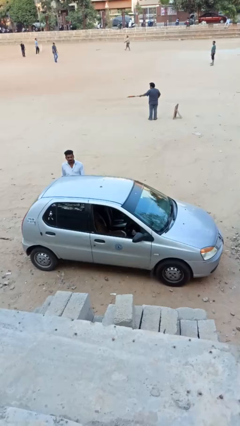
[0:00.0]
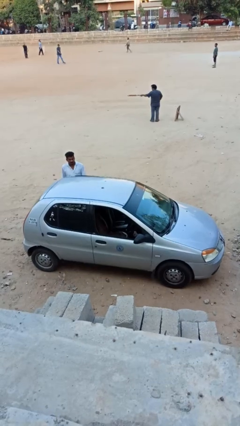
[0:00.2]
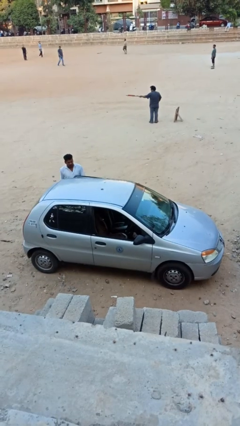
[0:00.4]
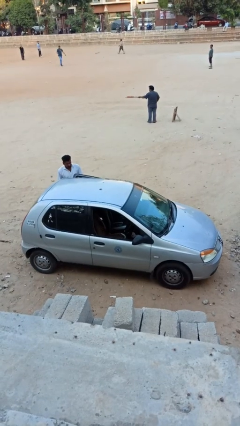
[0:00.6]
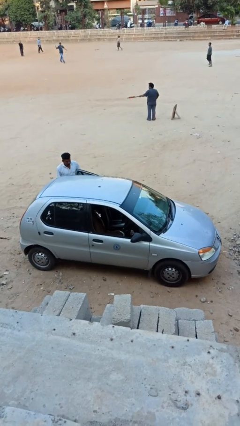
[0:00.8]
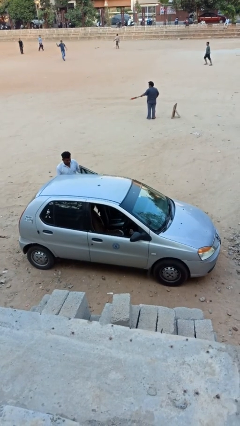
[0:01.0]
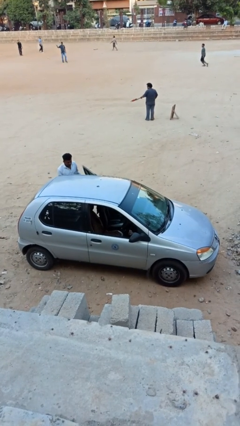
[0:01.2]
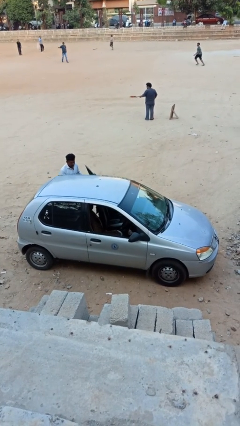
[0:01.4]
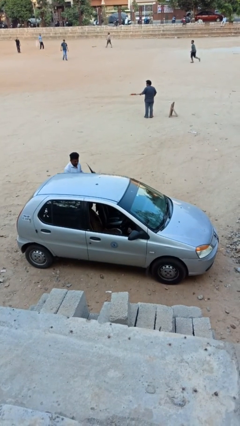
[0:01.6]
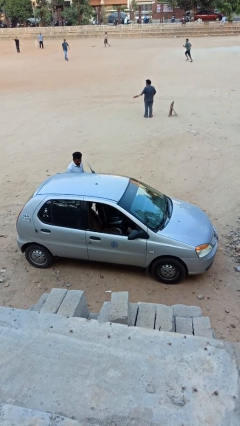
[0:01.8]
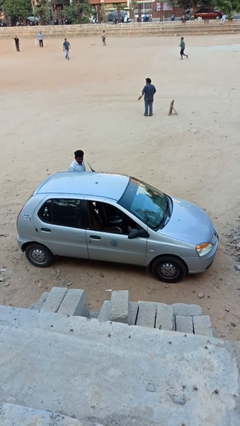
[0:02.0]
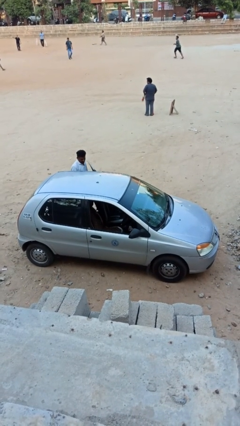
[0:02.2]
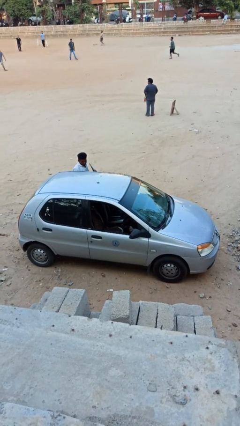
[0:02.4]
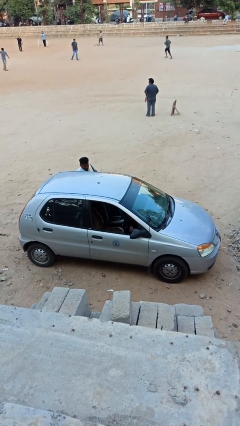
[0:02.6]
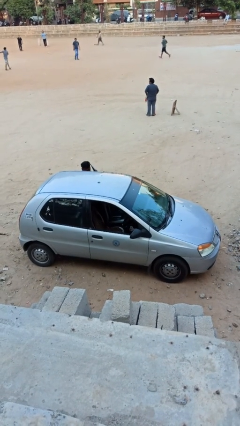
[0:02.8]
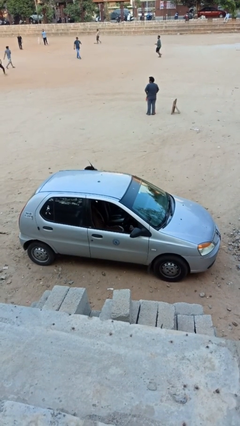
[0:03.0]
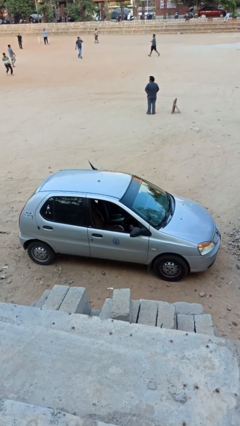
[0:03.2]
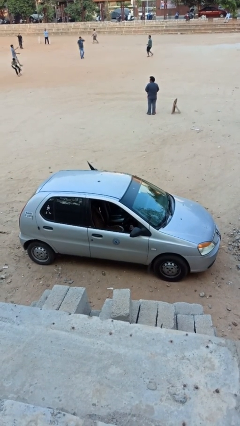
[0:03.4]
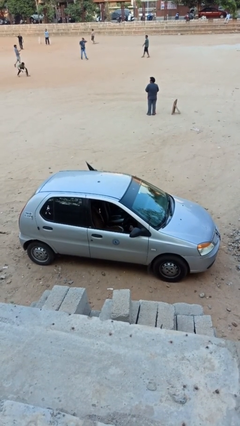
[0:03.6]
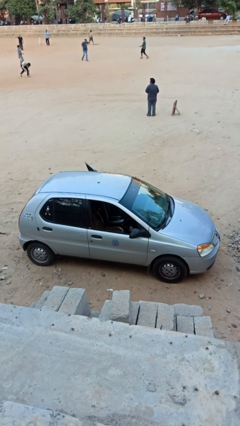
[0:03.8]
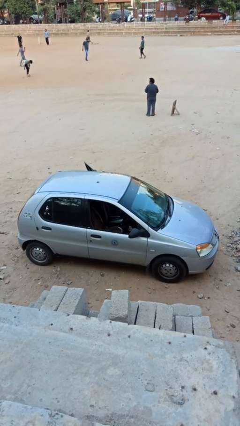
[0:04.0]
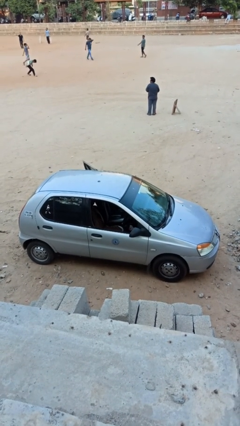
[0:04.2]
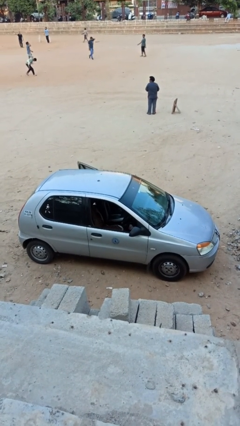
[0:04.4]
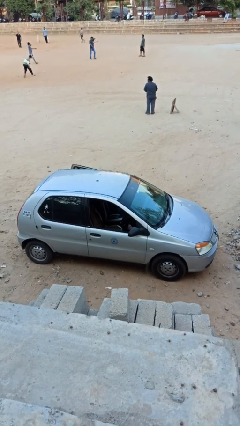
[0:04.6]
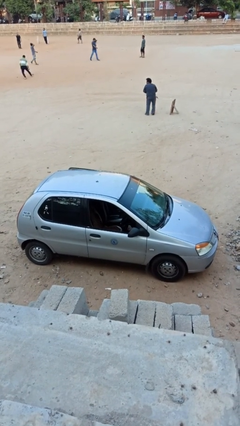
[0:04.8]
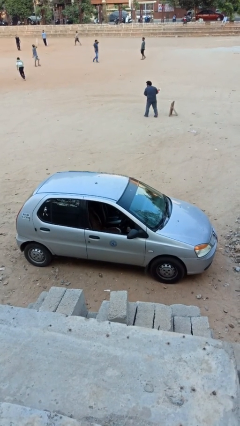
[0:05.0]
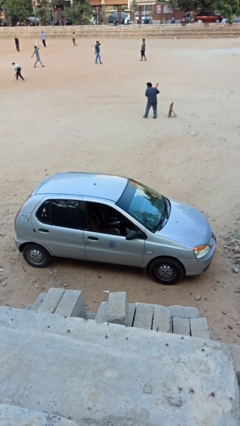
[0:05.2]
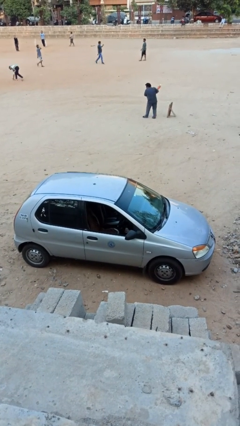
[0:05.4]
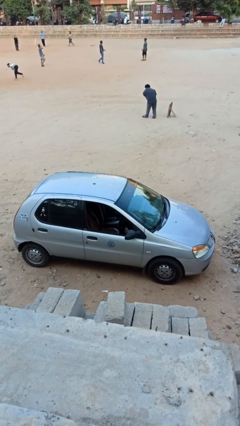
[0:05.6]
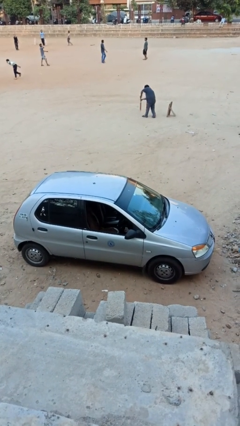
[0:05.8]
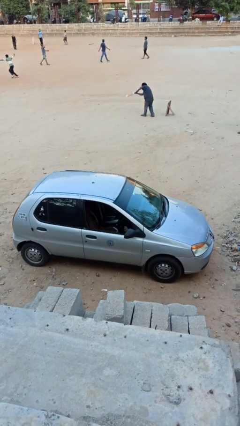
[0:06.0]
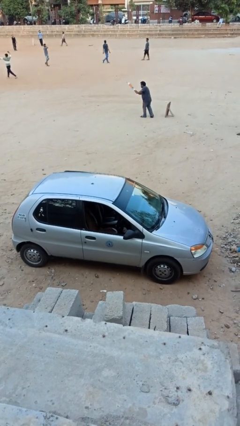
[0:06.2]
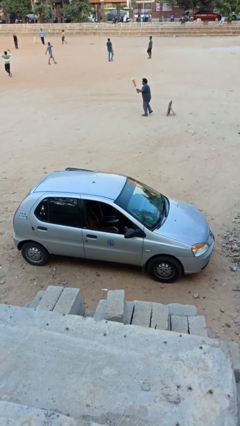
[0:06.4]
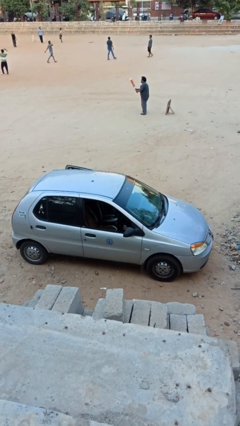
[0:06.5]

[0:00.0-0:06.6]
car picks up person

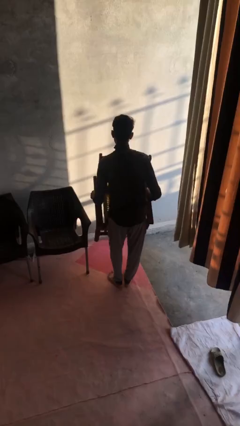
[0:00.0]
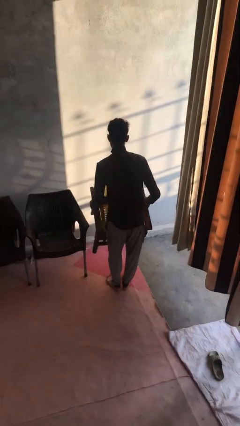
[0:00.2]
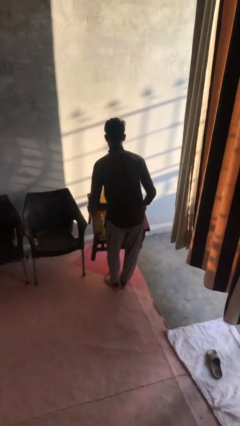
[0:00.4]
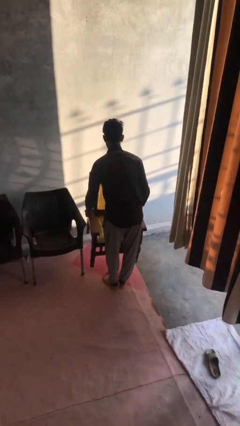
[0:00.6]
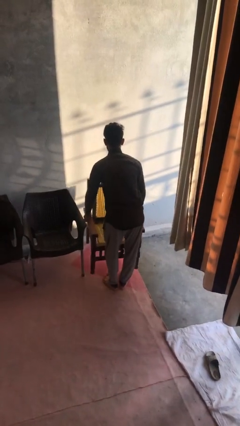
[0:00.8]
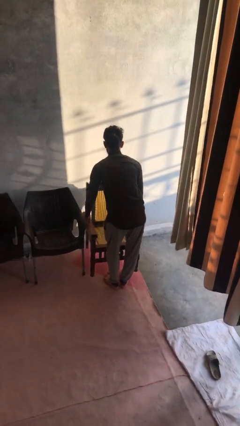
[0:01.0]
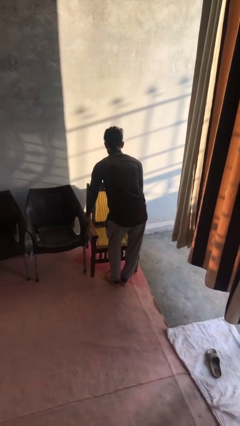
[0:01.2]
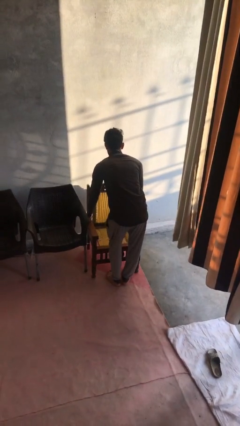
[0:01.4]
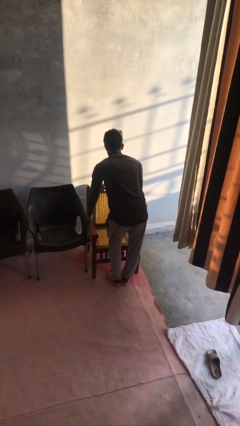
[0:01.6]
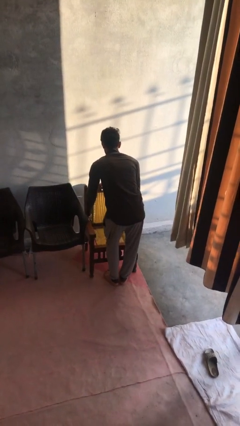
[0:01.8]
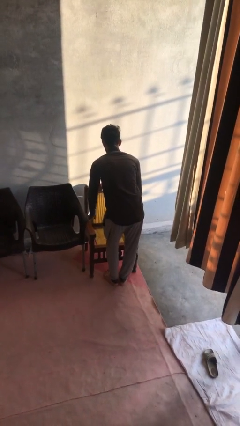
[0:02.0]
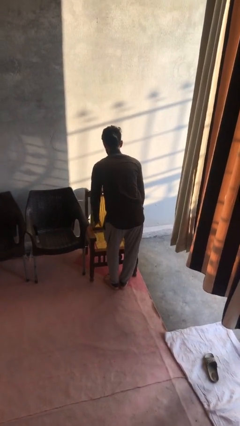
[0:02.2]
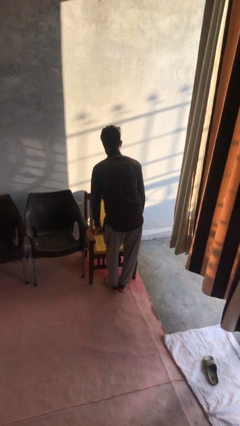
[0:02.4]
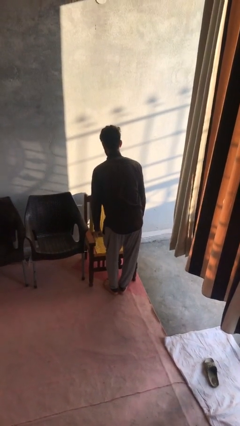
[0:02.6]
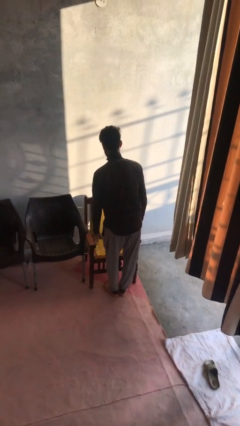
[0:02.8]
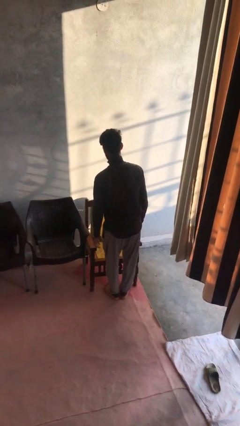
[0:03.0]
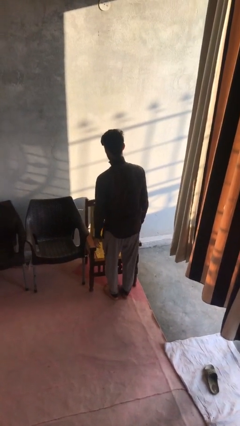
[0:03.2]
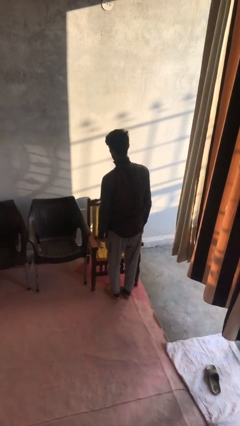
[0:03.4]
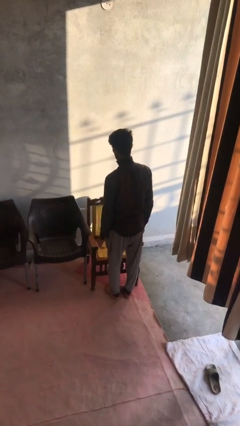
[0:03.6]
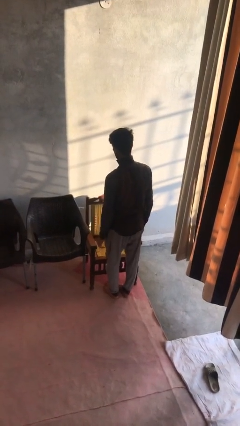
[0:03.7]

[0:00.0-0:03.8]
person puts down object on floor

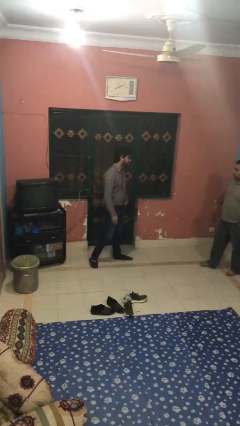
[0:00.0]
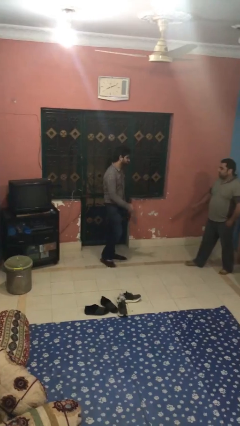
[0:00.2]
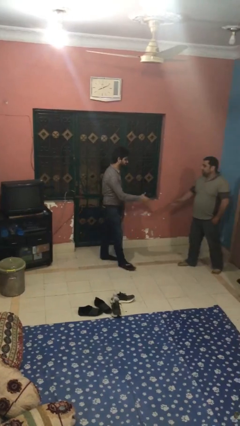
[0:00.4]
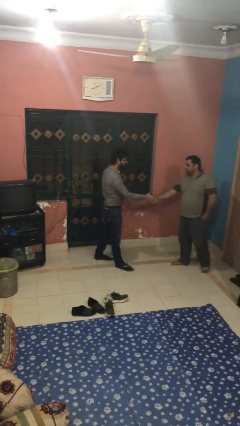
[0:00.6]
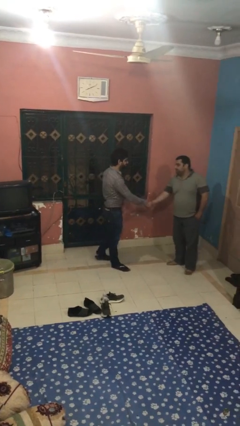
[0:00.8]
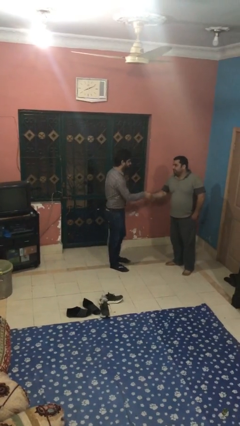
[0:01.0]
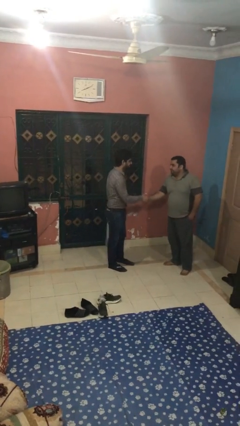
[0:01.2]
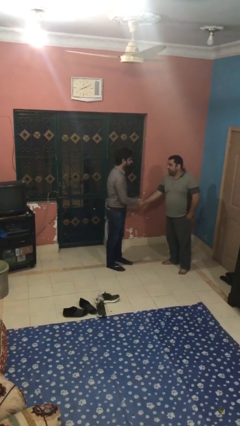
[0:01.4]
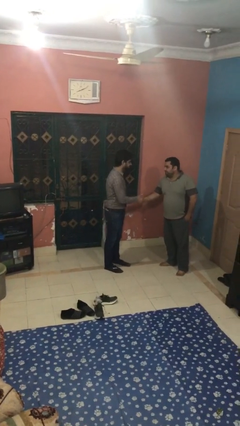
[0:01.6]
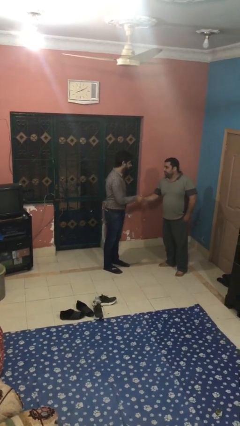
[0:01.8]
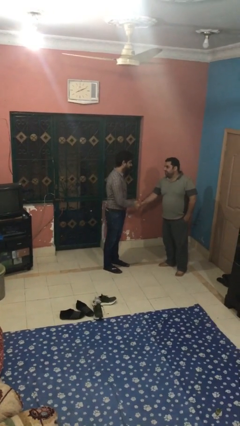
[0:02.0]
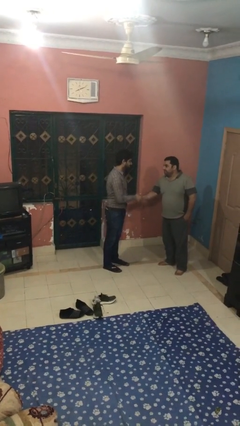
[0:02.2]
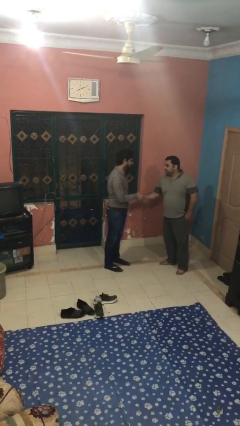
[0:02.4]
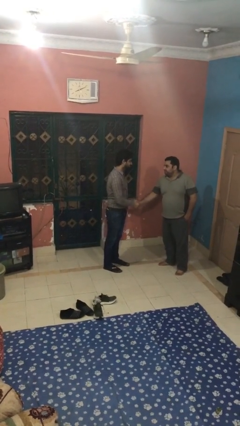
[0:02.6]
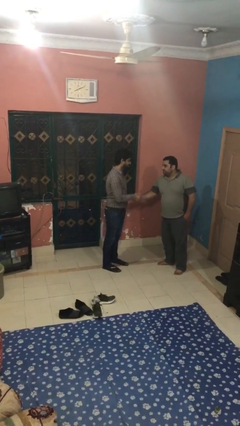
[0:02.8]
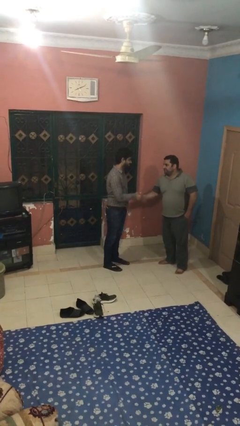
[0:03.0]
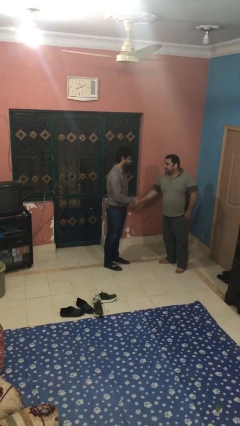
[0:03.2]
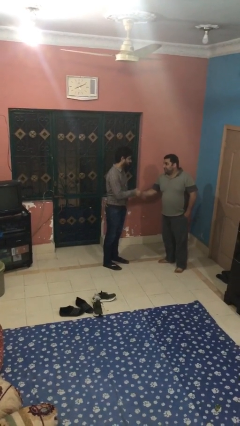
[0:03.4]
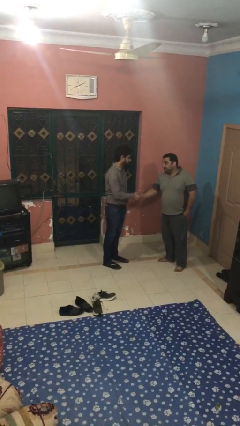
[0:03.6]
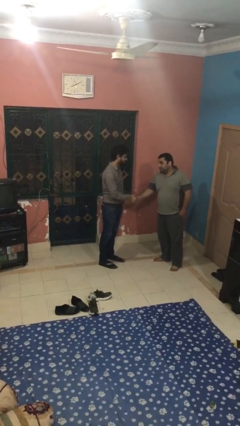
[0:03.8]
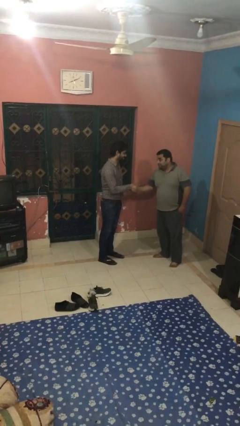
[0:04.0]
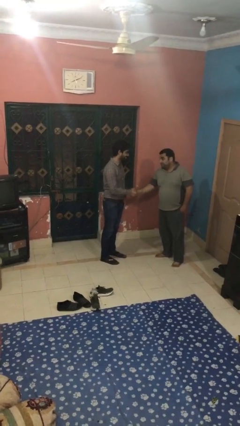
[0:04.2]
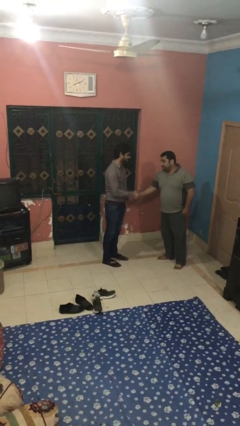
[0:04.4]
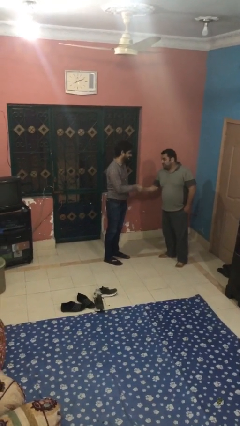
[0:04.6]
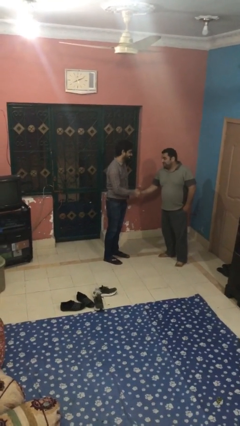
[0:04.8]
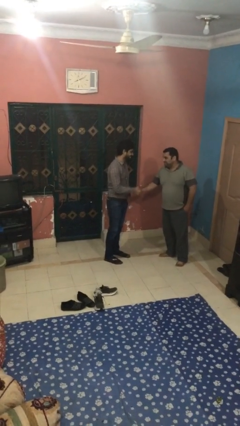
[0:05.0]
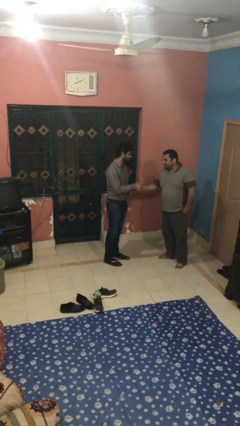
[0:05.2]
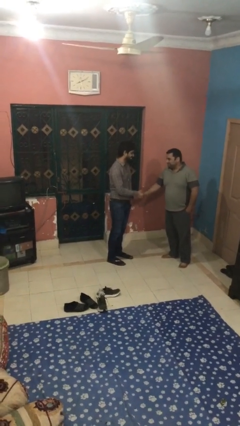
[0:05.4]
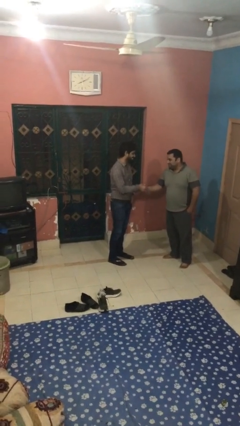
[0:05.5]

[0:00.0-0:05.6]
person shakes hand

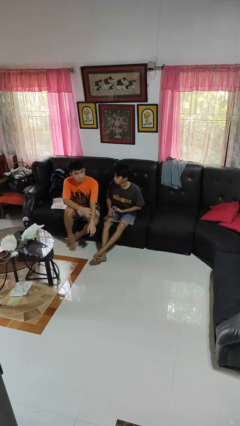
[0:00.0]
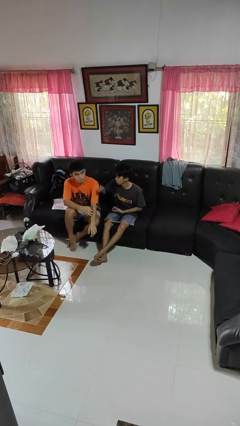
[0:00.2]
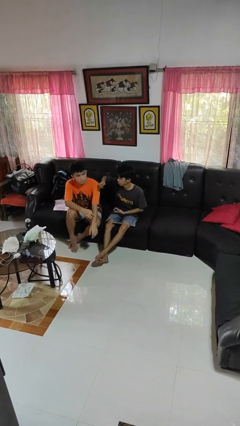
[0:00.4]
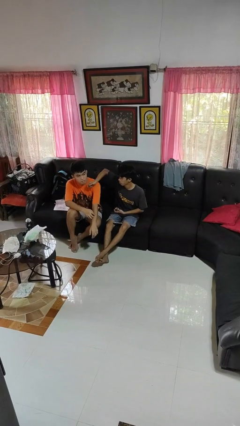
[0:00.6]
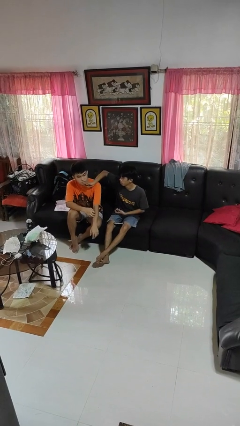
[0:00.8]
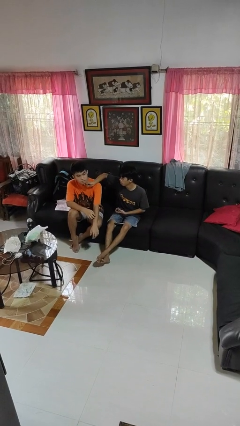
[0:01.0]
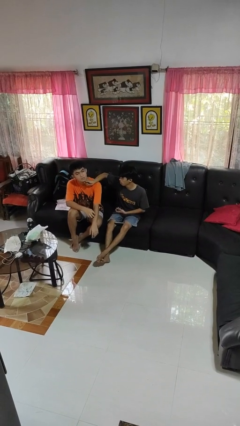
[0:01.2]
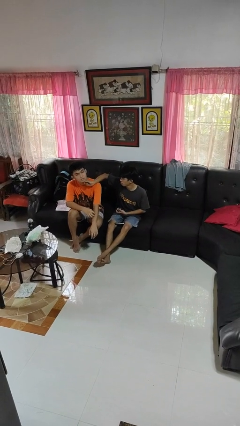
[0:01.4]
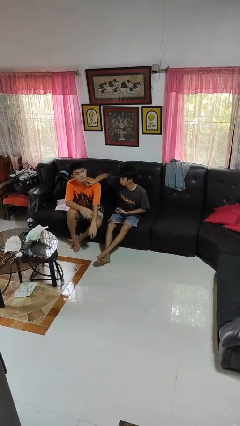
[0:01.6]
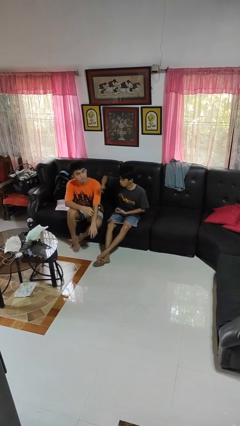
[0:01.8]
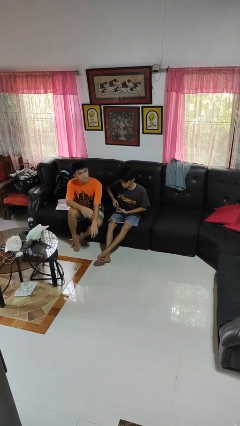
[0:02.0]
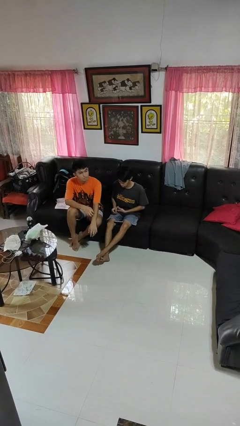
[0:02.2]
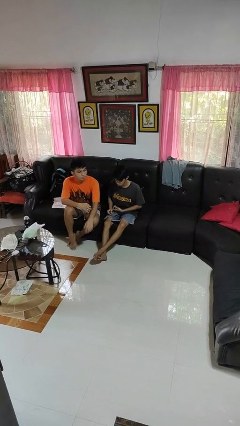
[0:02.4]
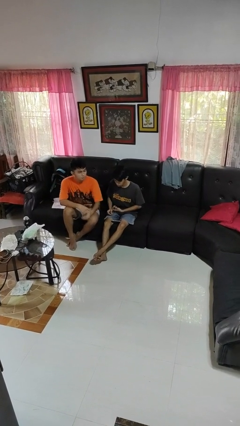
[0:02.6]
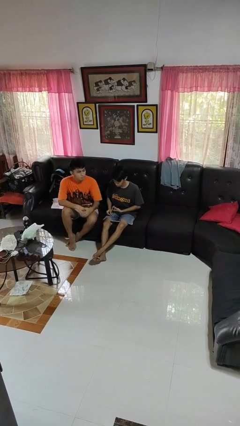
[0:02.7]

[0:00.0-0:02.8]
person touches face of person
